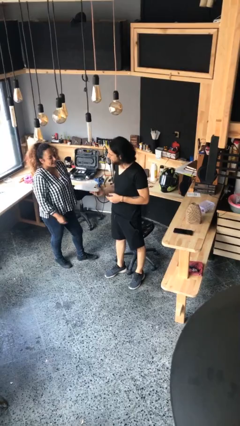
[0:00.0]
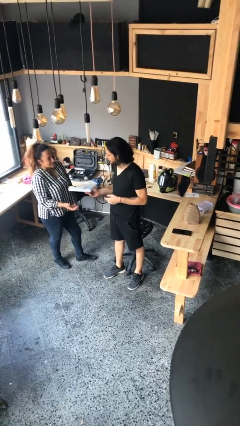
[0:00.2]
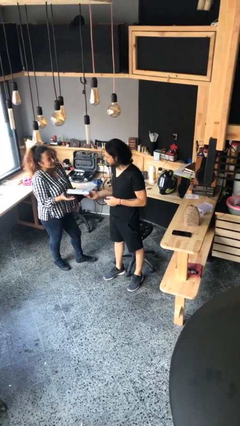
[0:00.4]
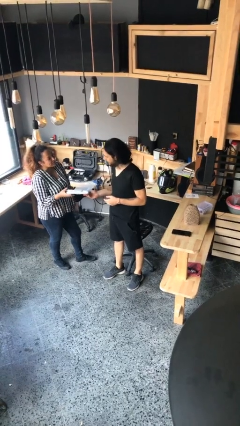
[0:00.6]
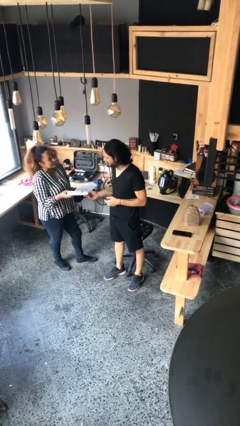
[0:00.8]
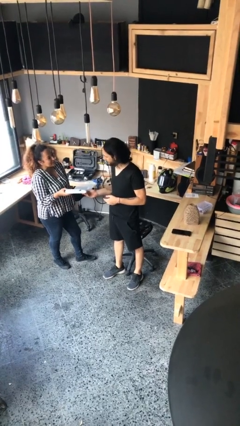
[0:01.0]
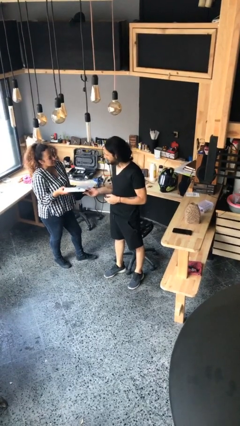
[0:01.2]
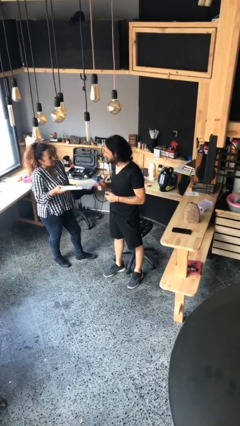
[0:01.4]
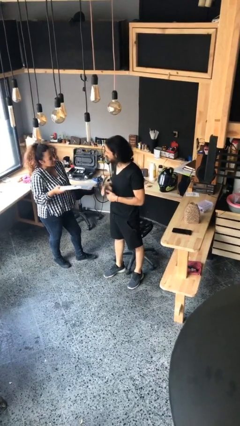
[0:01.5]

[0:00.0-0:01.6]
person transfers object to person

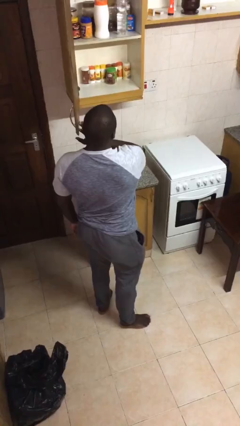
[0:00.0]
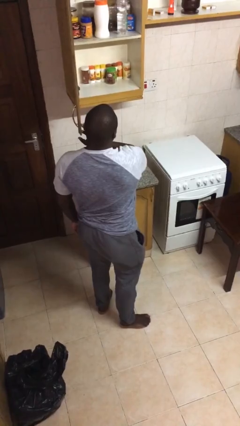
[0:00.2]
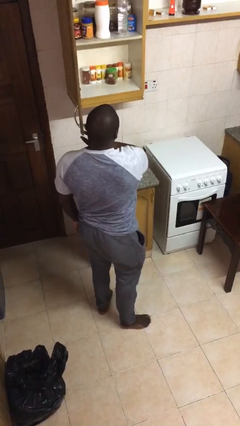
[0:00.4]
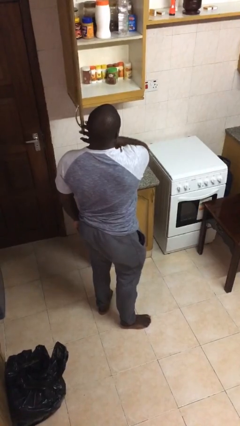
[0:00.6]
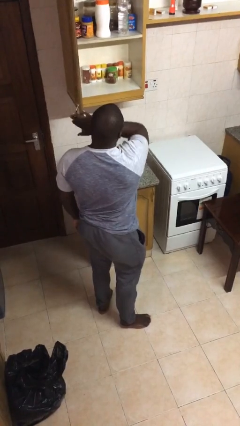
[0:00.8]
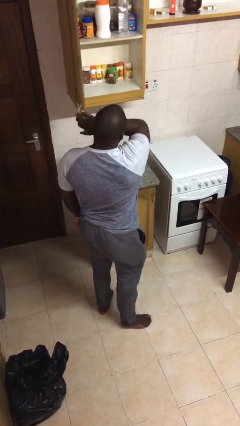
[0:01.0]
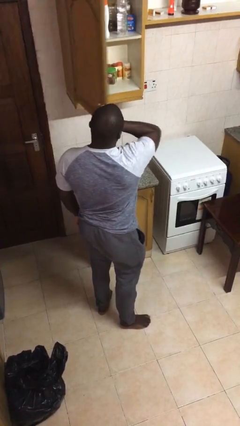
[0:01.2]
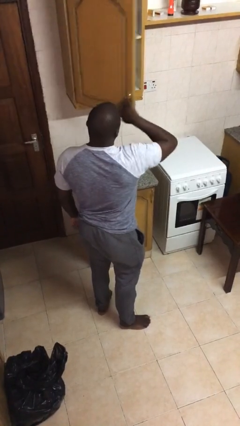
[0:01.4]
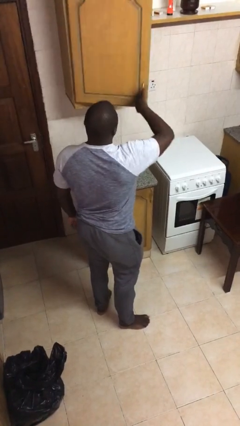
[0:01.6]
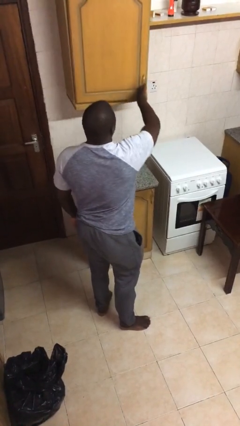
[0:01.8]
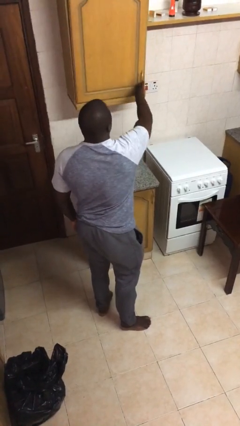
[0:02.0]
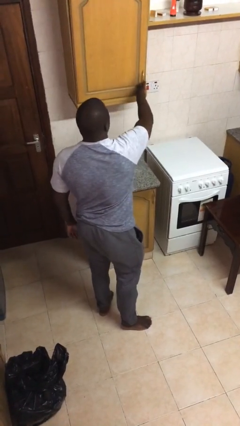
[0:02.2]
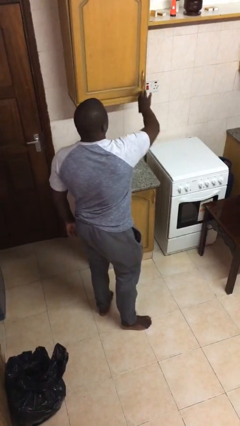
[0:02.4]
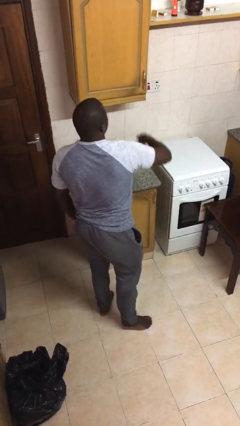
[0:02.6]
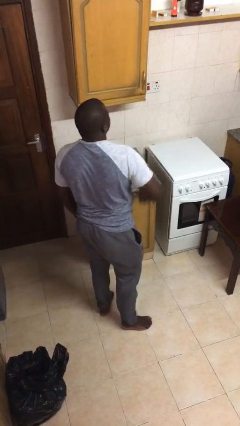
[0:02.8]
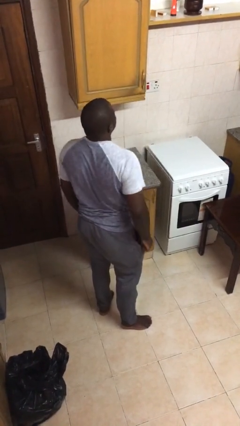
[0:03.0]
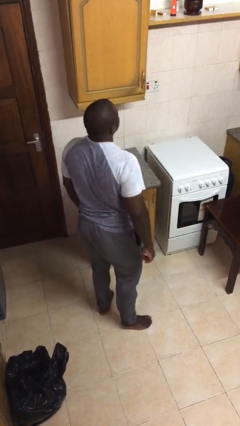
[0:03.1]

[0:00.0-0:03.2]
person closes cabinet

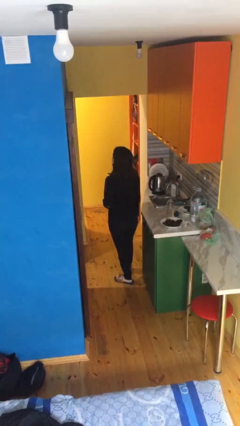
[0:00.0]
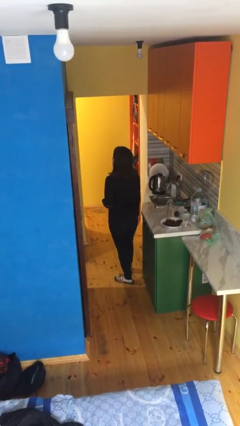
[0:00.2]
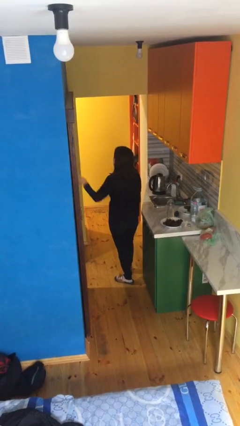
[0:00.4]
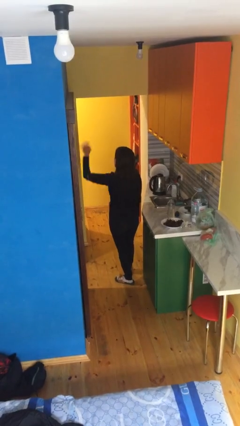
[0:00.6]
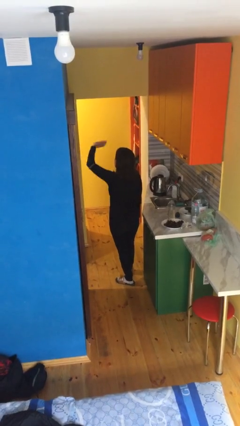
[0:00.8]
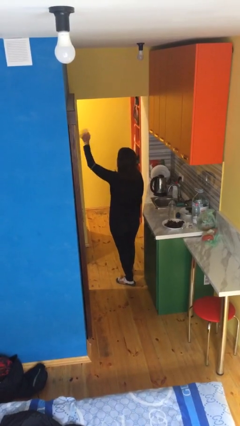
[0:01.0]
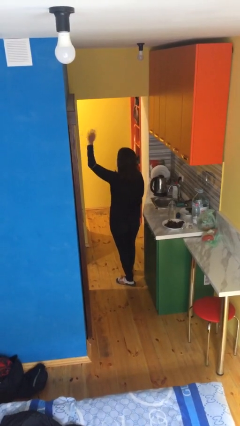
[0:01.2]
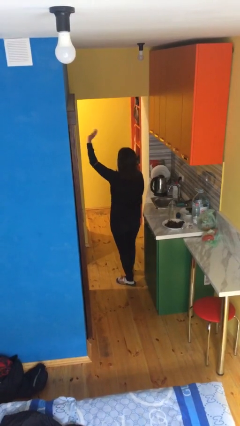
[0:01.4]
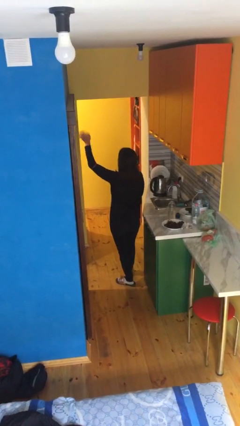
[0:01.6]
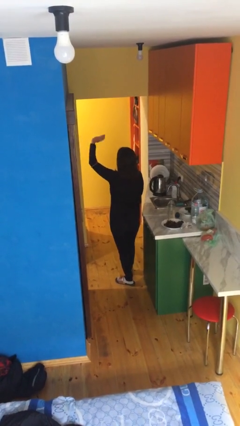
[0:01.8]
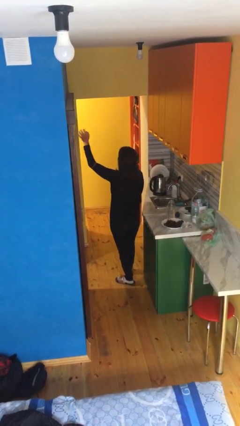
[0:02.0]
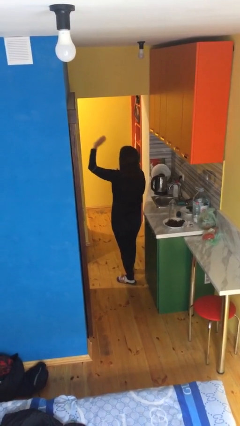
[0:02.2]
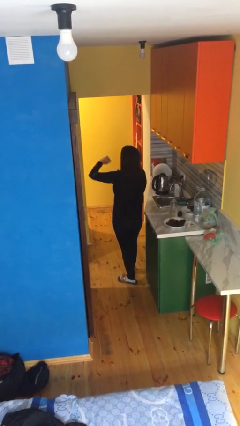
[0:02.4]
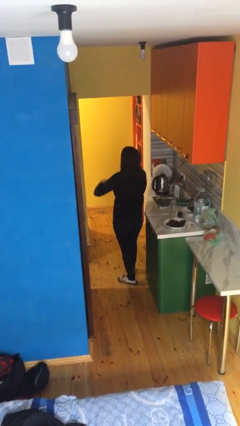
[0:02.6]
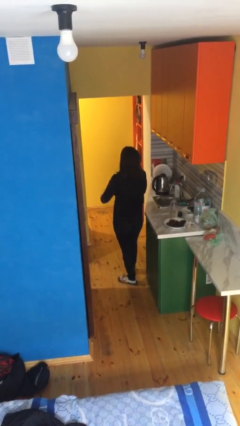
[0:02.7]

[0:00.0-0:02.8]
person waves at person

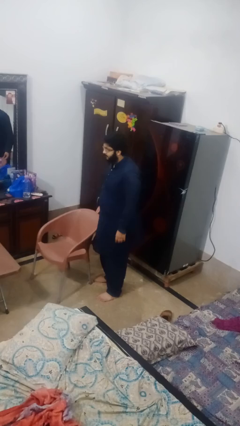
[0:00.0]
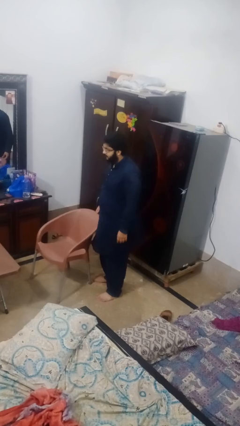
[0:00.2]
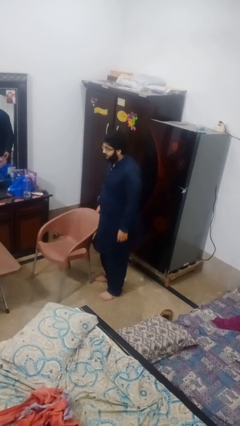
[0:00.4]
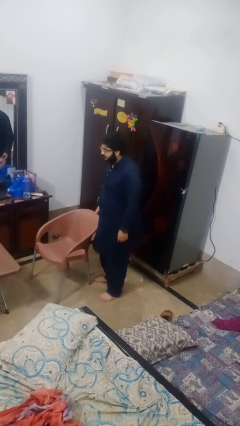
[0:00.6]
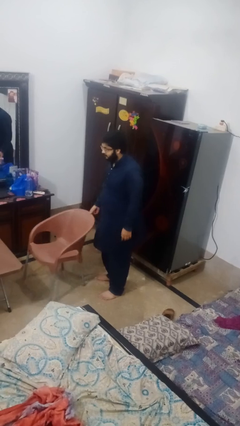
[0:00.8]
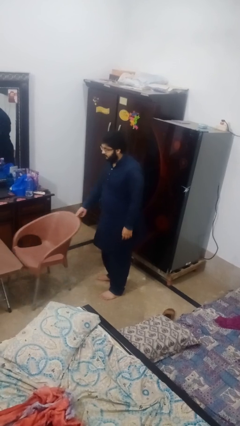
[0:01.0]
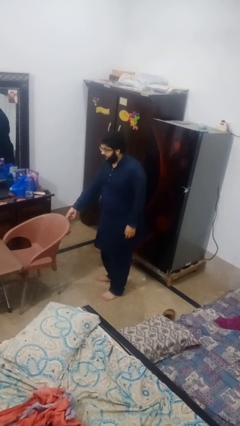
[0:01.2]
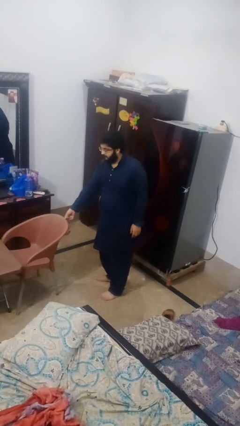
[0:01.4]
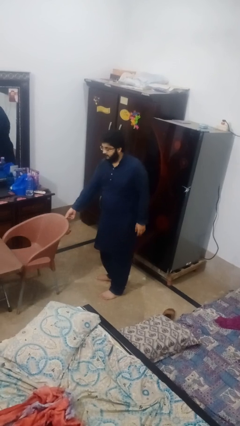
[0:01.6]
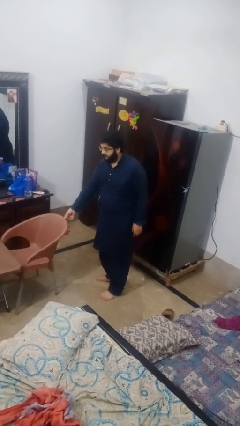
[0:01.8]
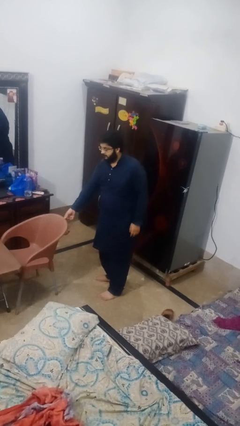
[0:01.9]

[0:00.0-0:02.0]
person pushes in chair

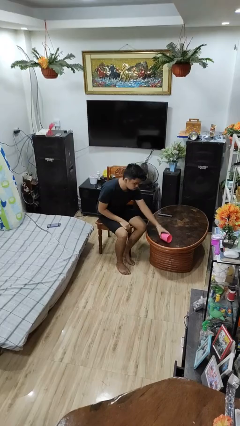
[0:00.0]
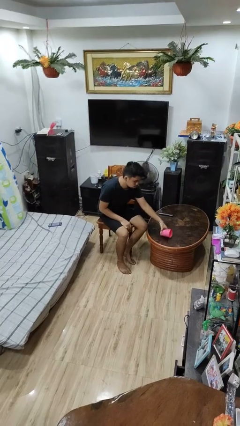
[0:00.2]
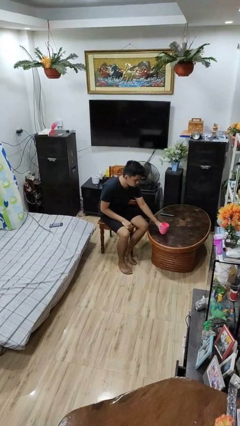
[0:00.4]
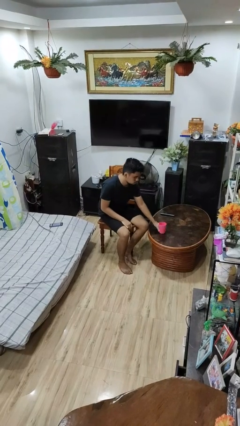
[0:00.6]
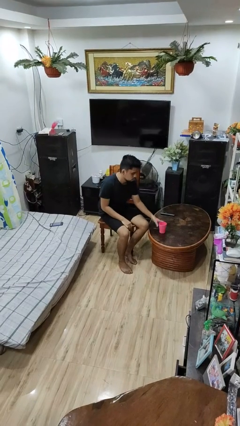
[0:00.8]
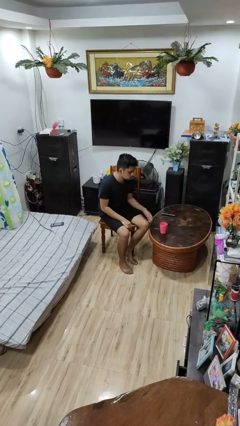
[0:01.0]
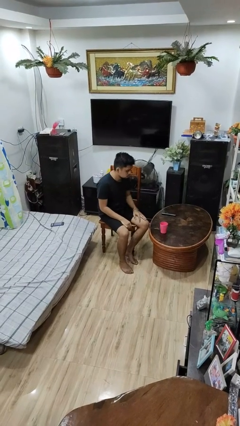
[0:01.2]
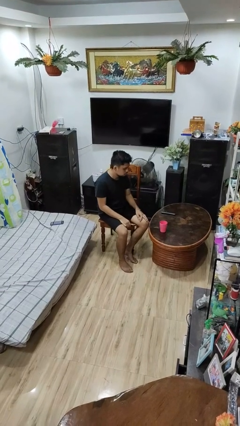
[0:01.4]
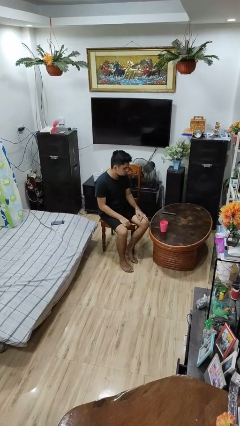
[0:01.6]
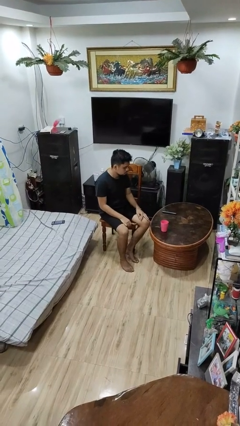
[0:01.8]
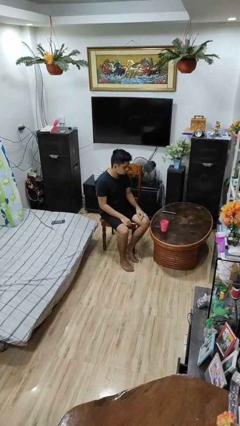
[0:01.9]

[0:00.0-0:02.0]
person sets upright glass

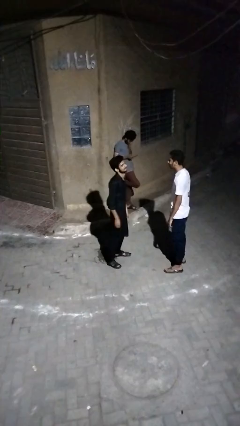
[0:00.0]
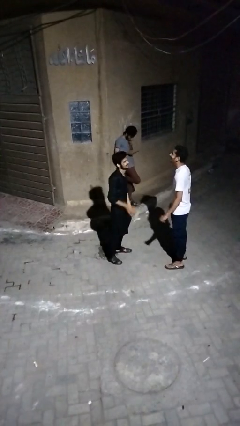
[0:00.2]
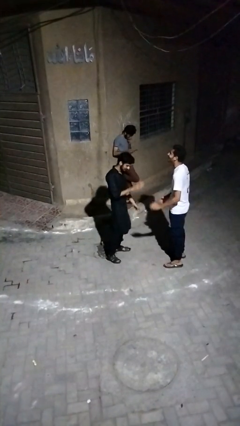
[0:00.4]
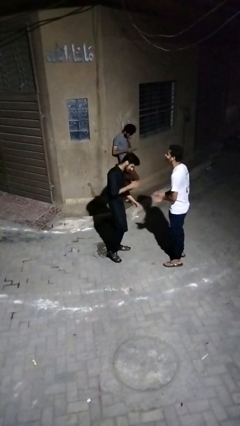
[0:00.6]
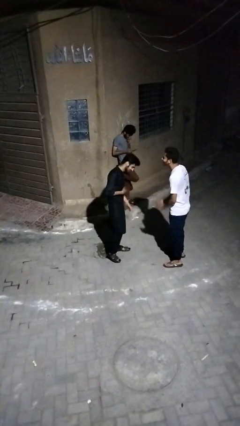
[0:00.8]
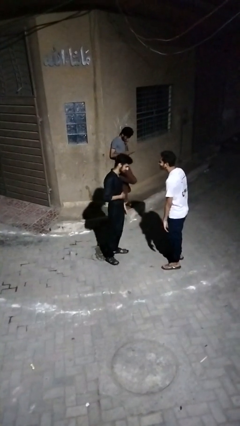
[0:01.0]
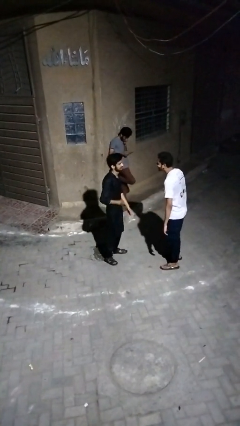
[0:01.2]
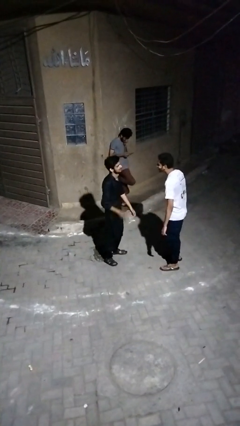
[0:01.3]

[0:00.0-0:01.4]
person laughs with person

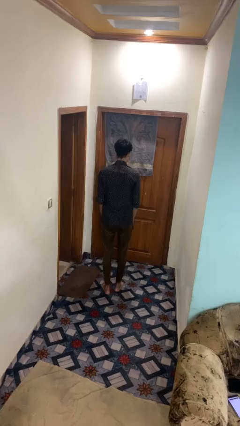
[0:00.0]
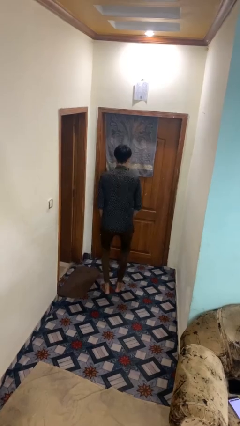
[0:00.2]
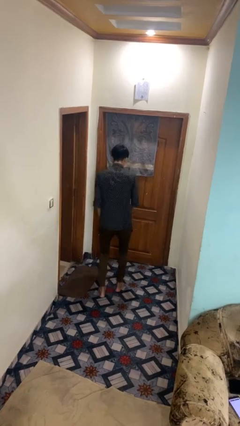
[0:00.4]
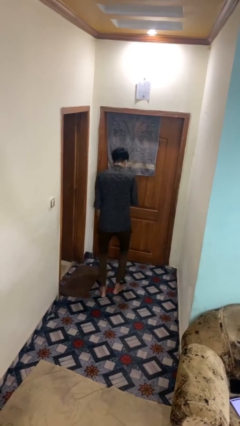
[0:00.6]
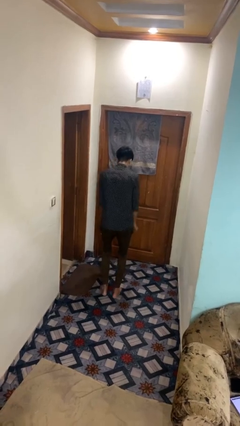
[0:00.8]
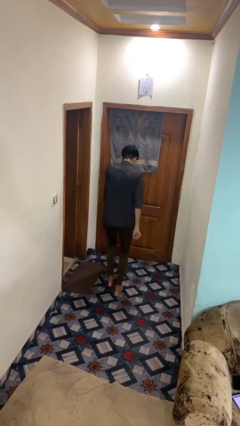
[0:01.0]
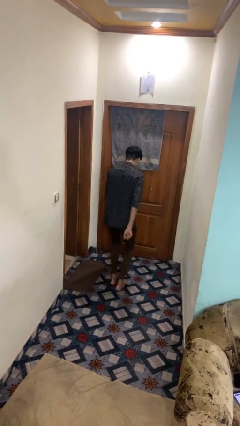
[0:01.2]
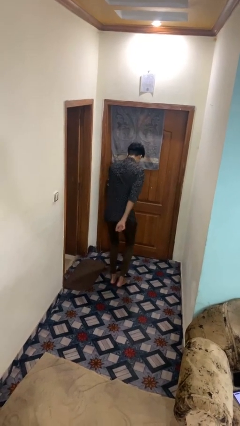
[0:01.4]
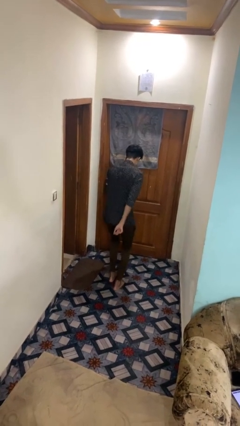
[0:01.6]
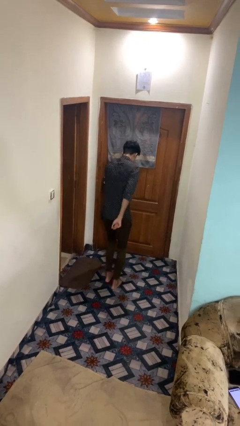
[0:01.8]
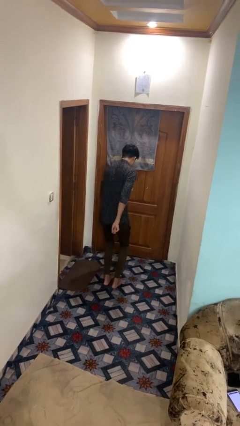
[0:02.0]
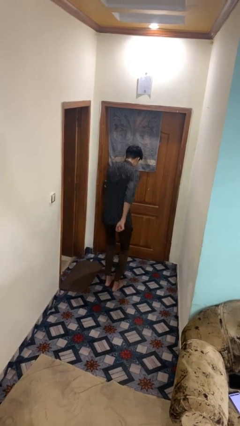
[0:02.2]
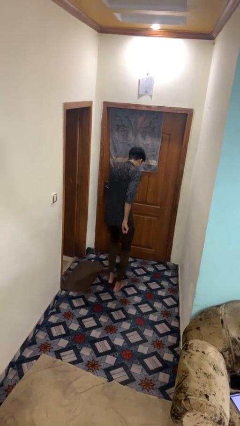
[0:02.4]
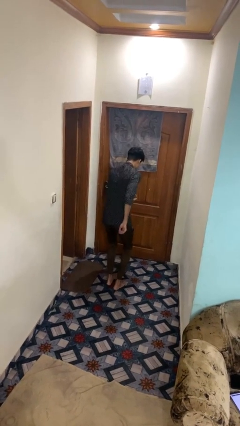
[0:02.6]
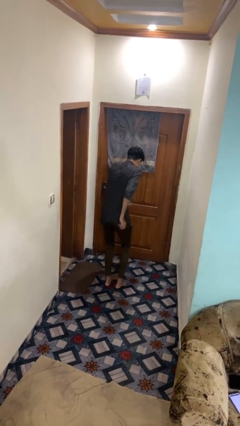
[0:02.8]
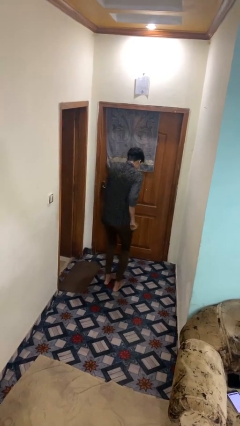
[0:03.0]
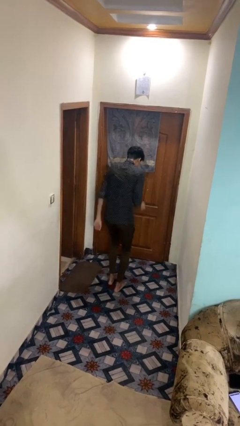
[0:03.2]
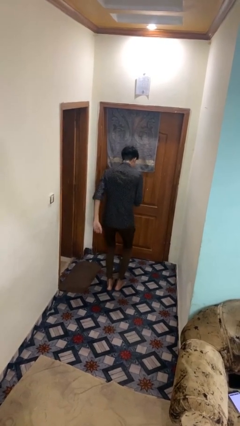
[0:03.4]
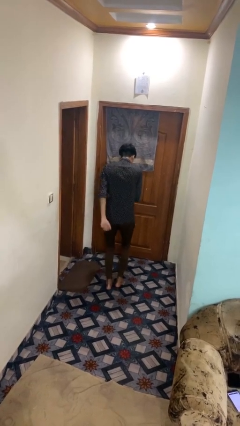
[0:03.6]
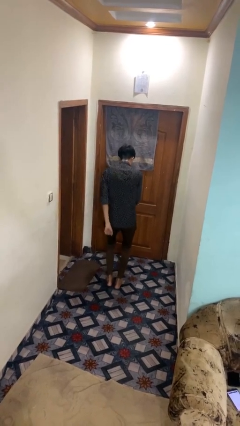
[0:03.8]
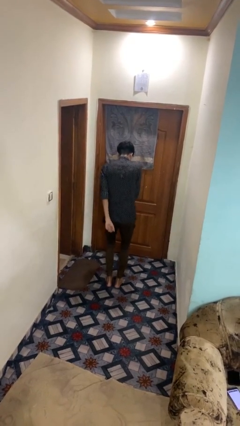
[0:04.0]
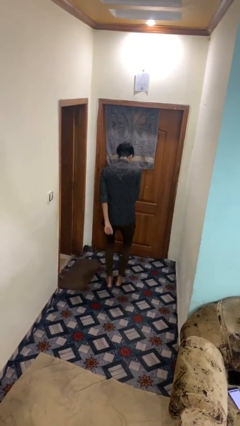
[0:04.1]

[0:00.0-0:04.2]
person dances in place
